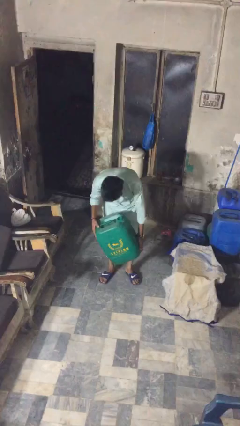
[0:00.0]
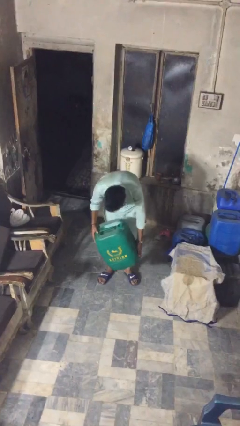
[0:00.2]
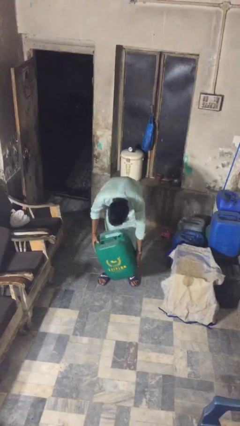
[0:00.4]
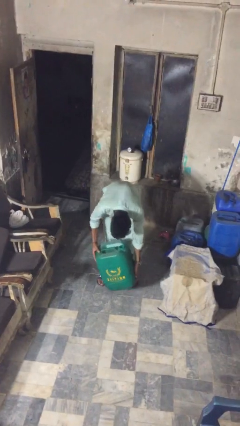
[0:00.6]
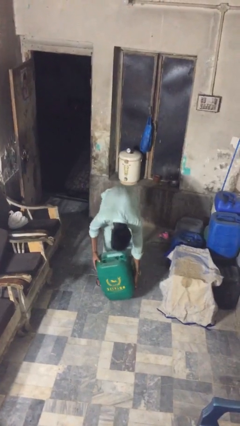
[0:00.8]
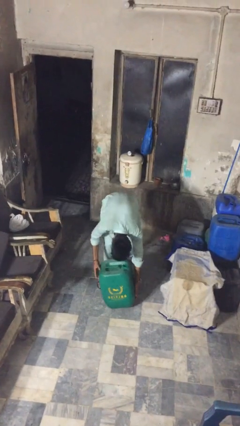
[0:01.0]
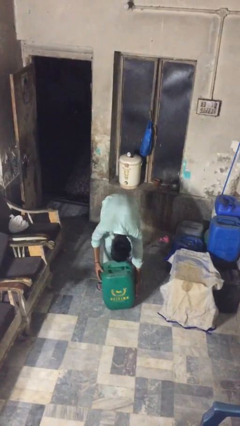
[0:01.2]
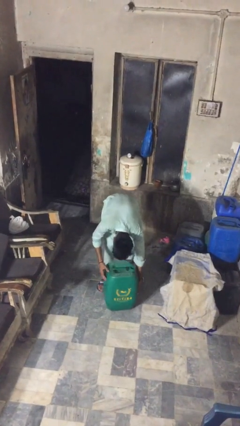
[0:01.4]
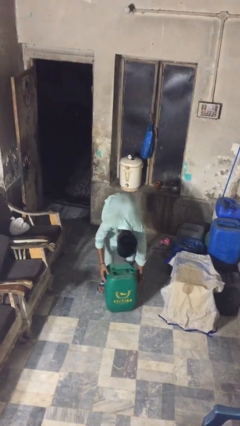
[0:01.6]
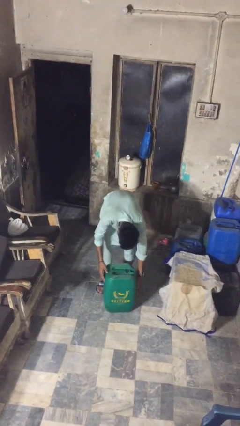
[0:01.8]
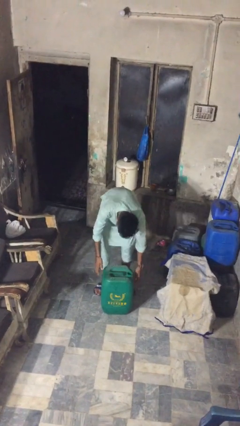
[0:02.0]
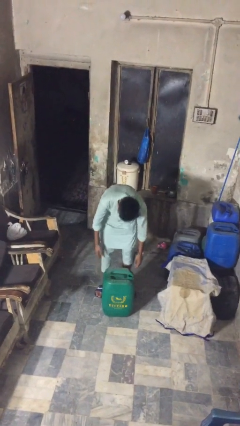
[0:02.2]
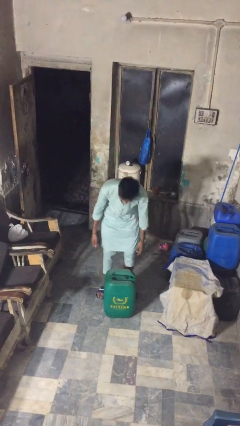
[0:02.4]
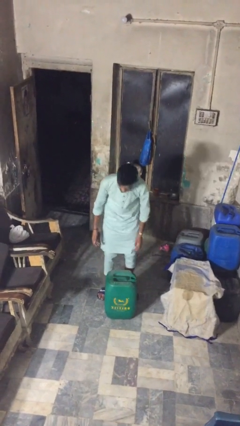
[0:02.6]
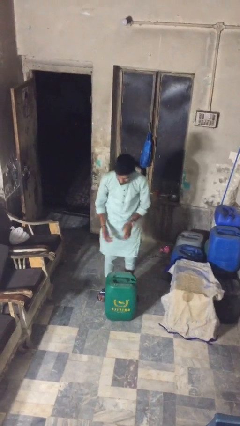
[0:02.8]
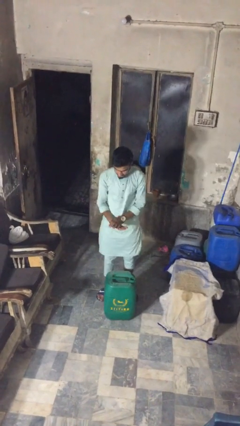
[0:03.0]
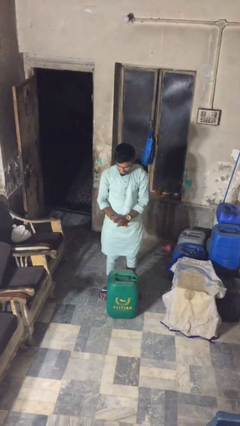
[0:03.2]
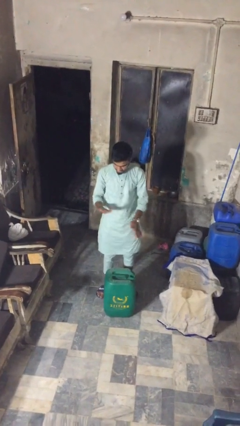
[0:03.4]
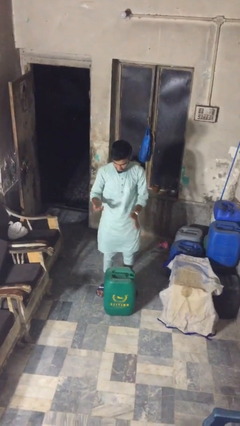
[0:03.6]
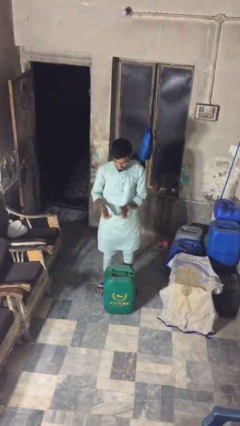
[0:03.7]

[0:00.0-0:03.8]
person puts down object on floor

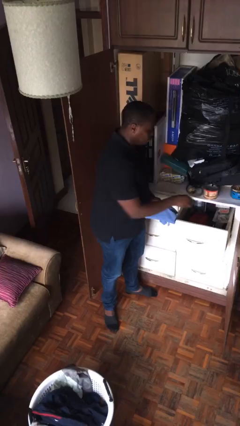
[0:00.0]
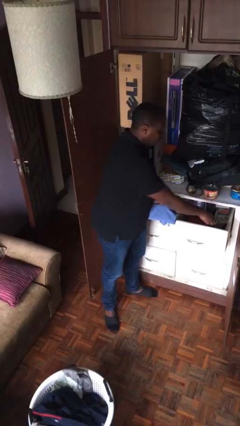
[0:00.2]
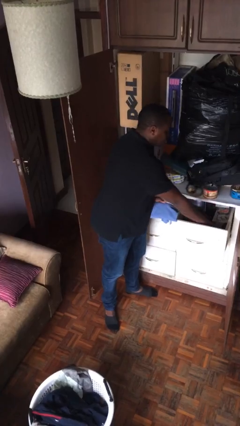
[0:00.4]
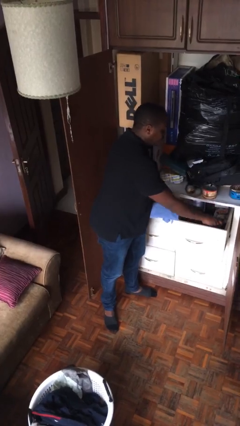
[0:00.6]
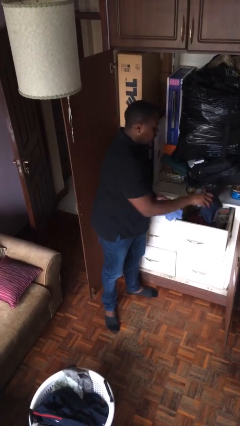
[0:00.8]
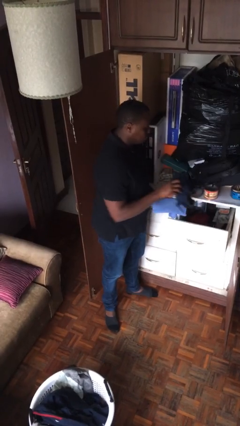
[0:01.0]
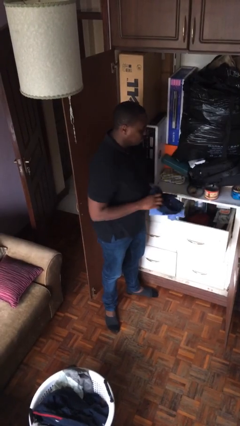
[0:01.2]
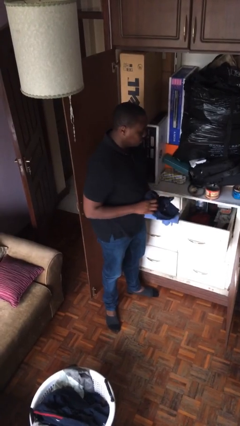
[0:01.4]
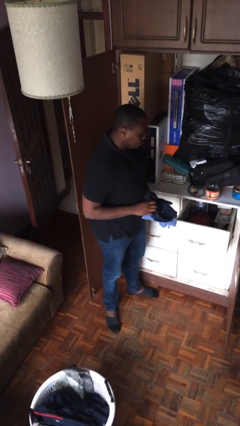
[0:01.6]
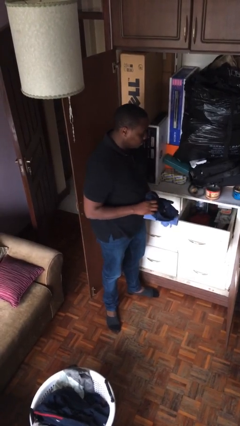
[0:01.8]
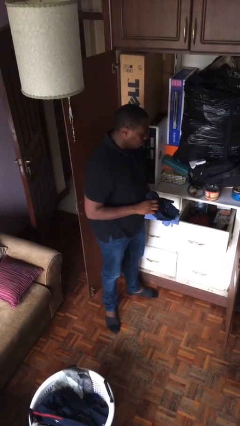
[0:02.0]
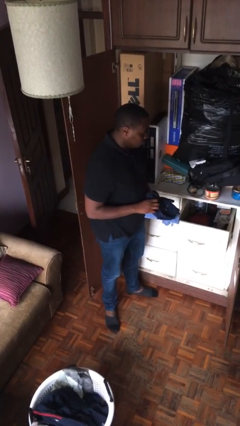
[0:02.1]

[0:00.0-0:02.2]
person takes clothes from dresser

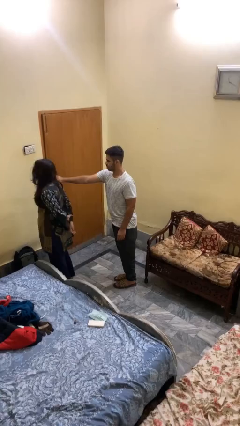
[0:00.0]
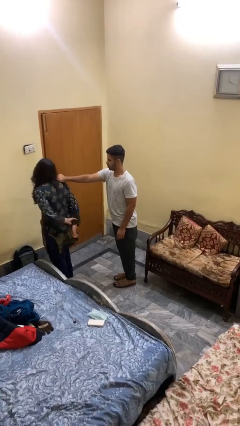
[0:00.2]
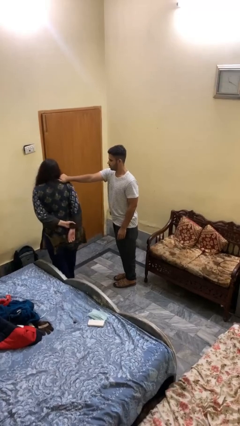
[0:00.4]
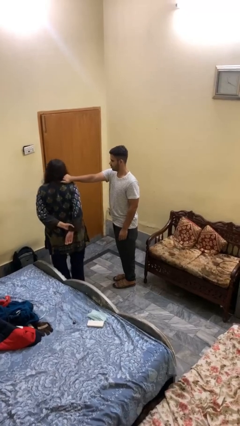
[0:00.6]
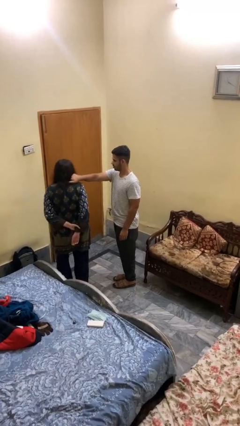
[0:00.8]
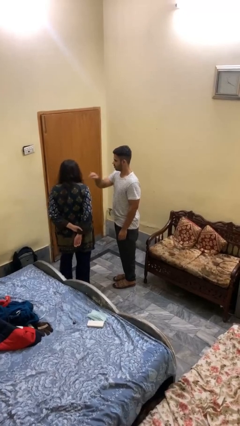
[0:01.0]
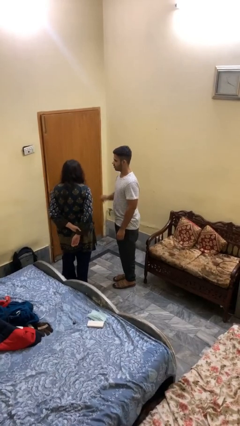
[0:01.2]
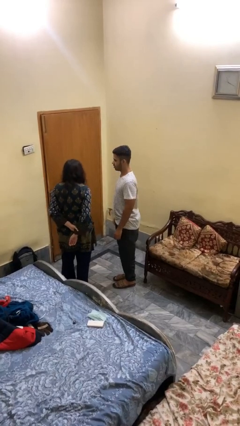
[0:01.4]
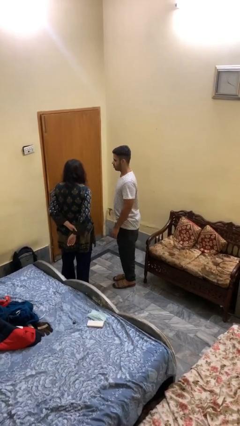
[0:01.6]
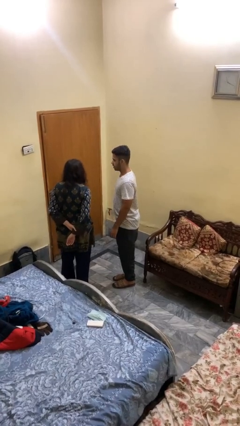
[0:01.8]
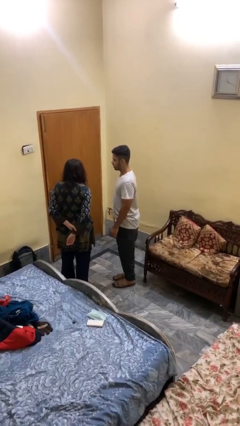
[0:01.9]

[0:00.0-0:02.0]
person spins person around

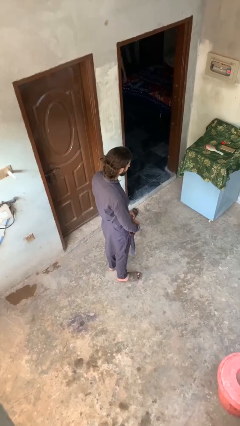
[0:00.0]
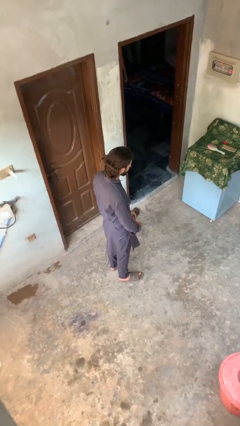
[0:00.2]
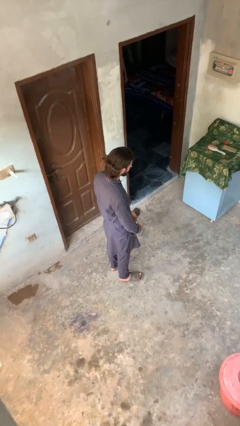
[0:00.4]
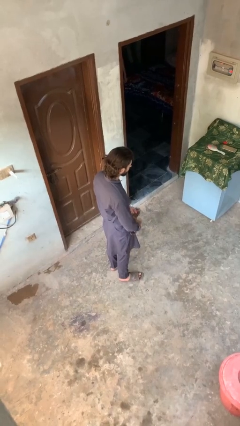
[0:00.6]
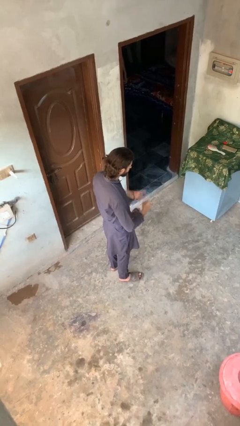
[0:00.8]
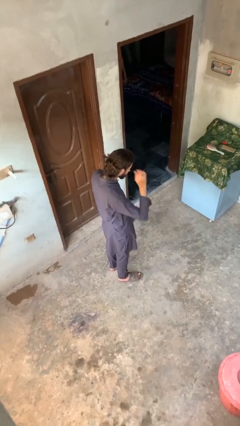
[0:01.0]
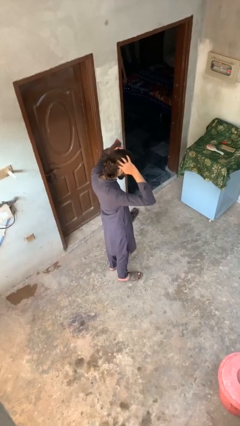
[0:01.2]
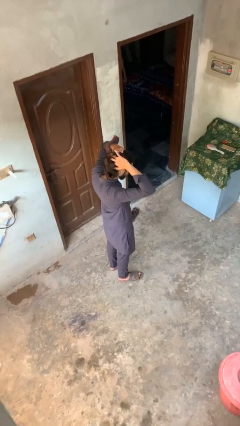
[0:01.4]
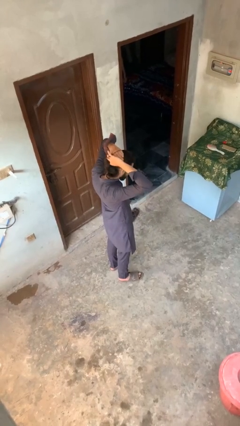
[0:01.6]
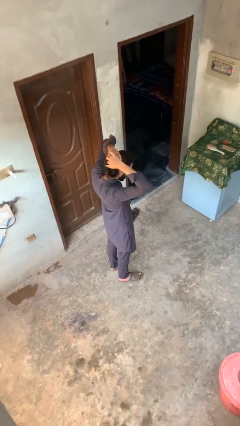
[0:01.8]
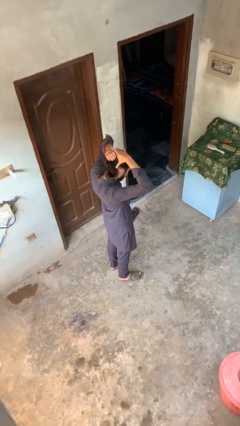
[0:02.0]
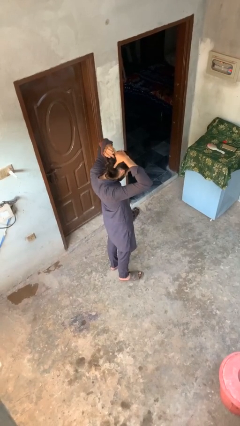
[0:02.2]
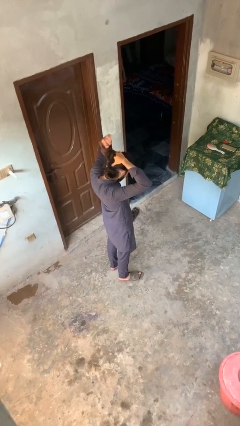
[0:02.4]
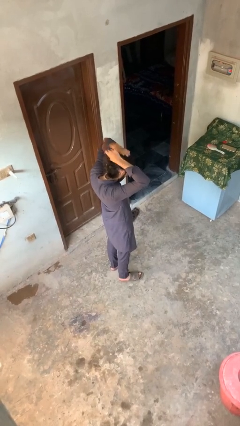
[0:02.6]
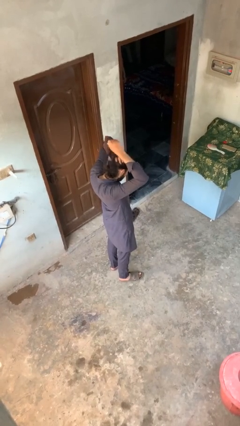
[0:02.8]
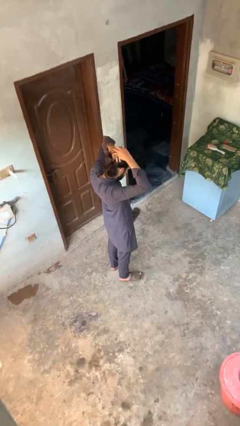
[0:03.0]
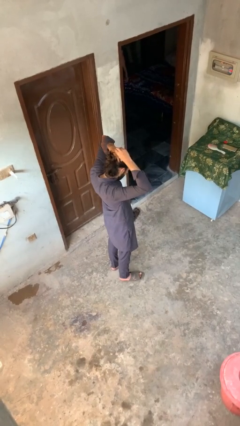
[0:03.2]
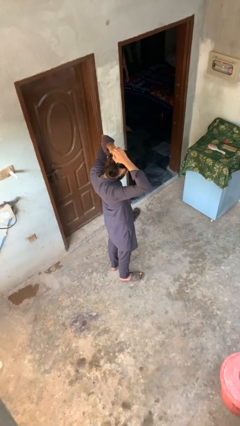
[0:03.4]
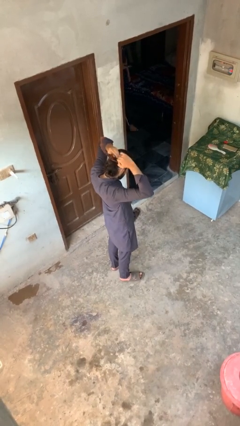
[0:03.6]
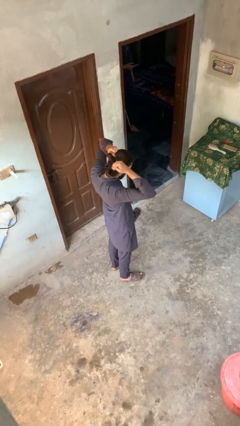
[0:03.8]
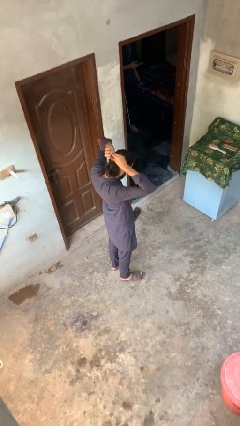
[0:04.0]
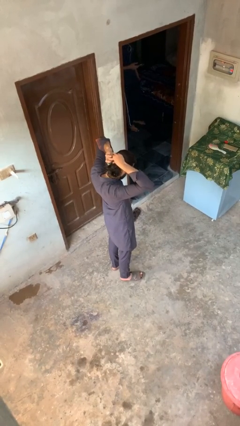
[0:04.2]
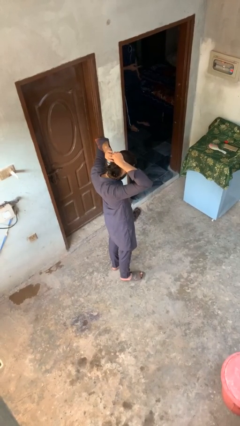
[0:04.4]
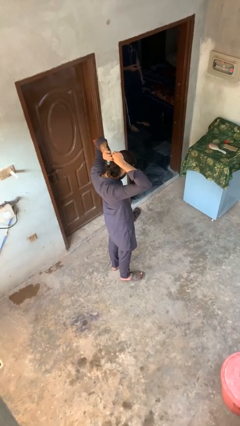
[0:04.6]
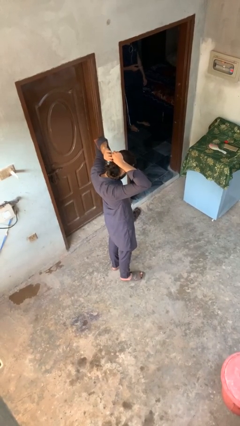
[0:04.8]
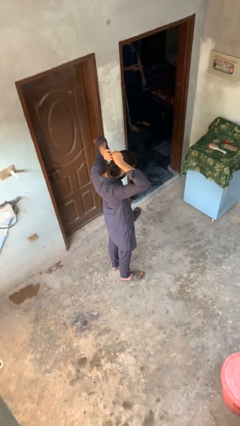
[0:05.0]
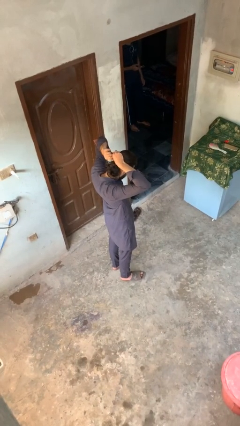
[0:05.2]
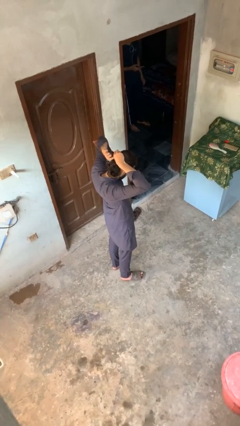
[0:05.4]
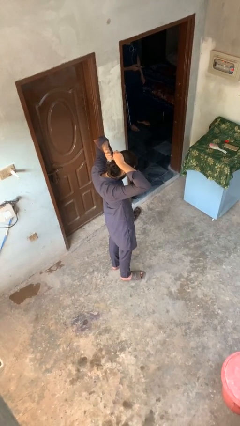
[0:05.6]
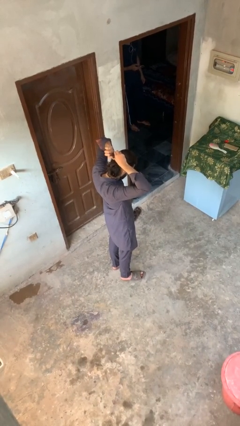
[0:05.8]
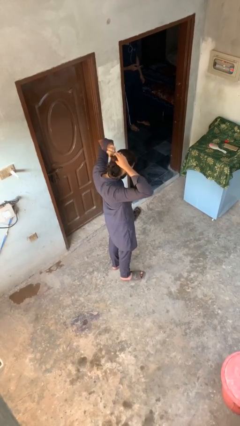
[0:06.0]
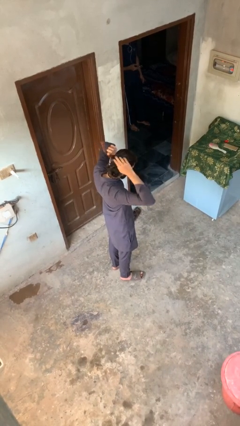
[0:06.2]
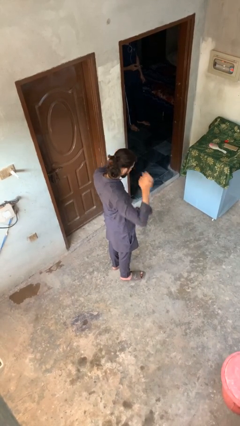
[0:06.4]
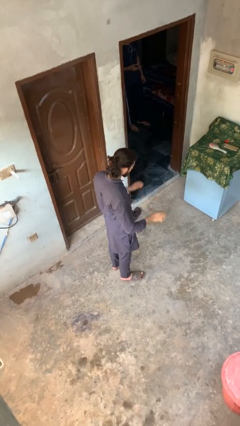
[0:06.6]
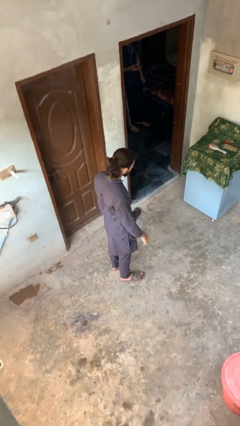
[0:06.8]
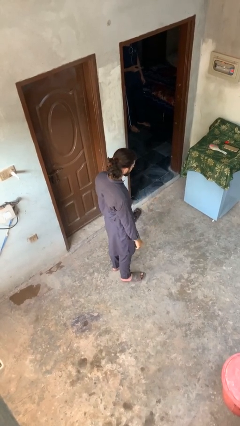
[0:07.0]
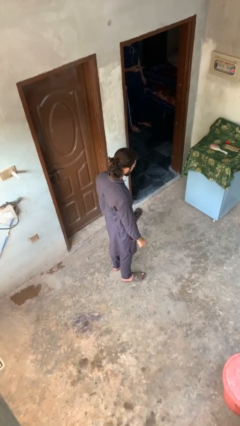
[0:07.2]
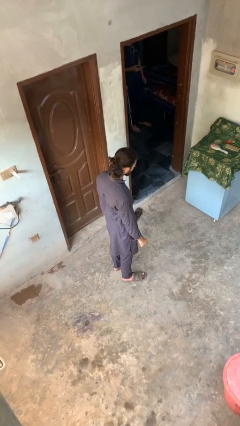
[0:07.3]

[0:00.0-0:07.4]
person puts hair in ponytail

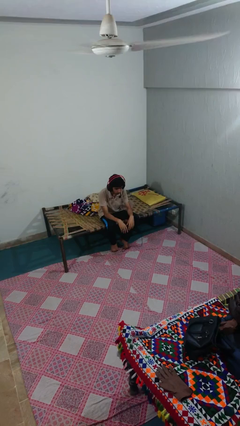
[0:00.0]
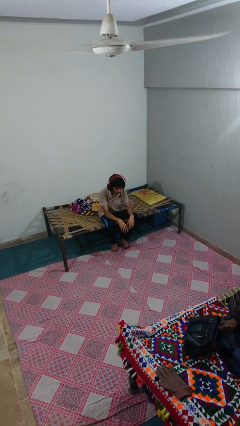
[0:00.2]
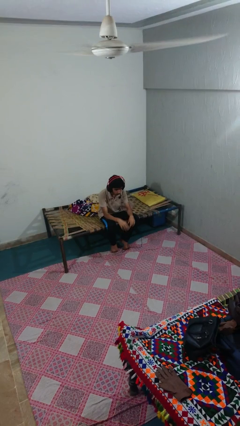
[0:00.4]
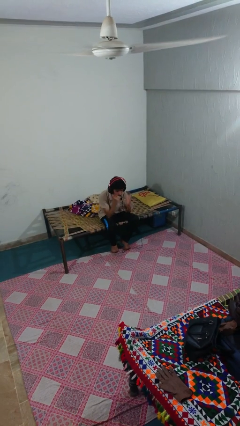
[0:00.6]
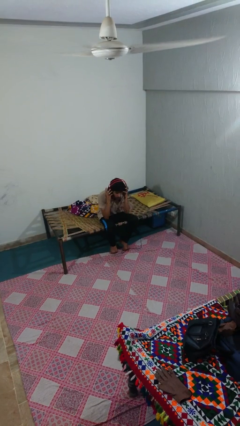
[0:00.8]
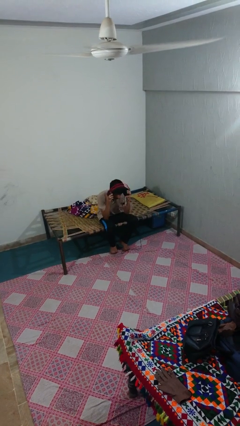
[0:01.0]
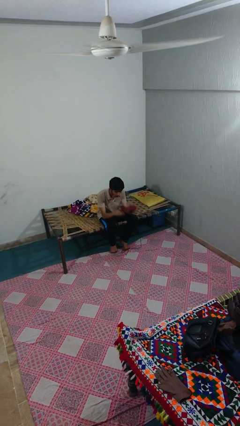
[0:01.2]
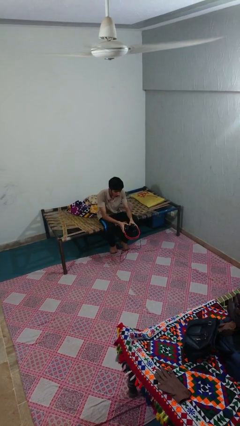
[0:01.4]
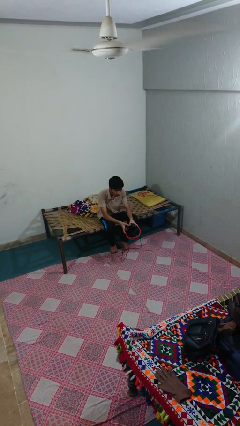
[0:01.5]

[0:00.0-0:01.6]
person takes off headphones

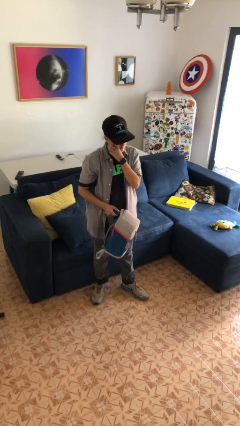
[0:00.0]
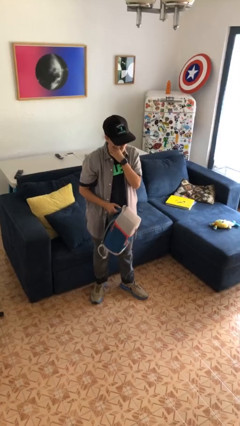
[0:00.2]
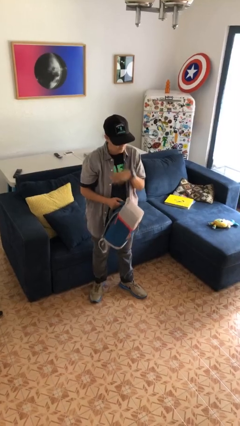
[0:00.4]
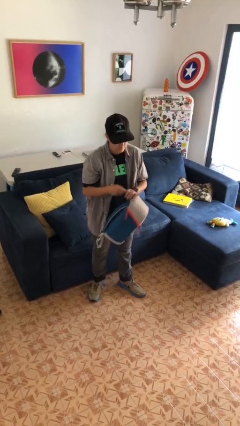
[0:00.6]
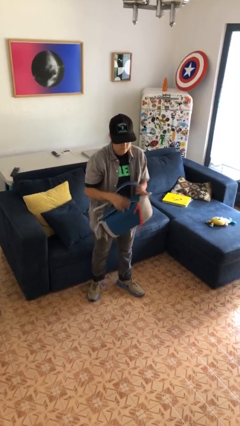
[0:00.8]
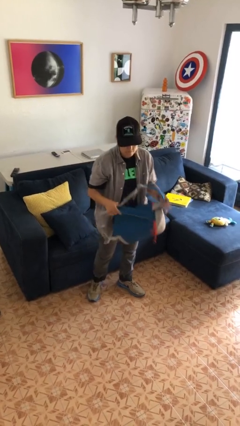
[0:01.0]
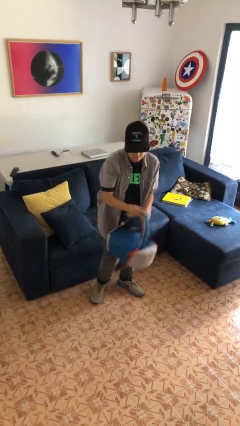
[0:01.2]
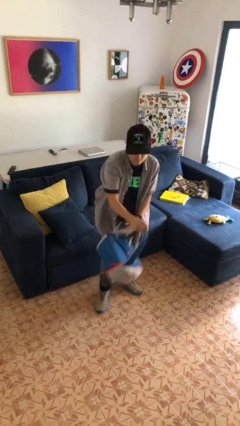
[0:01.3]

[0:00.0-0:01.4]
person drops object
